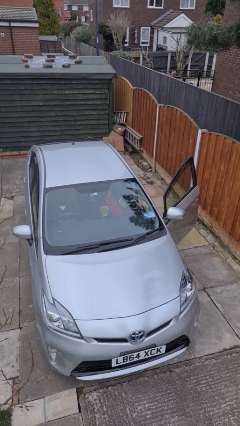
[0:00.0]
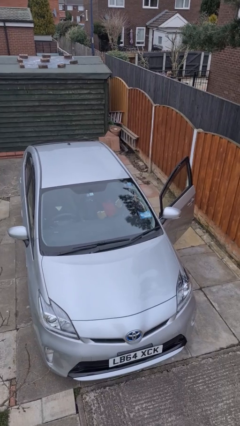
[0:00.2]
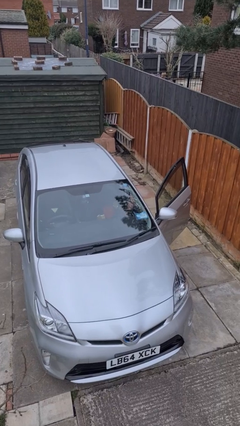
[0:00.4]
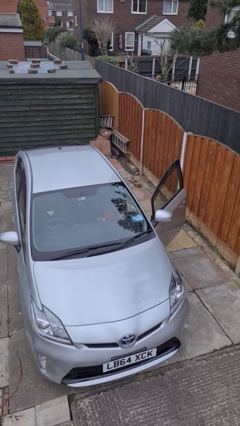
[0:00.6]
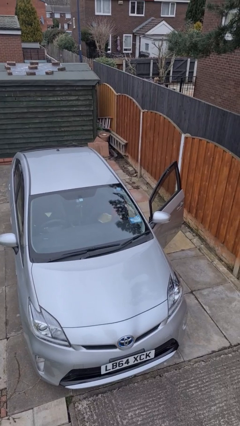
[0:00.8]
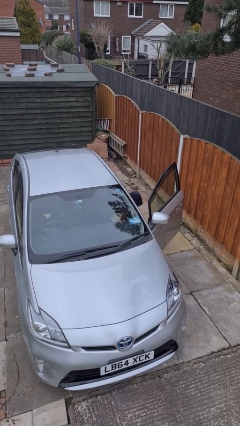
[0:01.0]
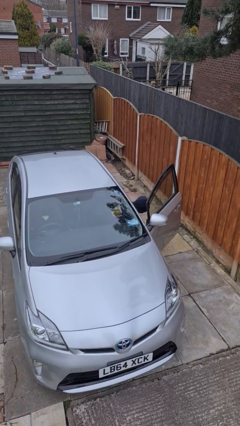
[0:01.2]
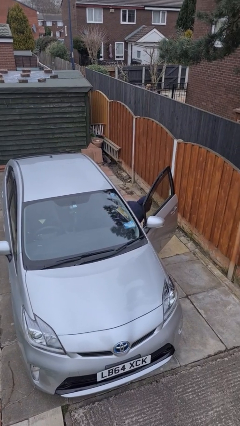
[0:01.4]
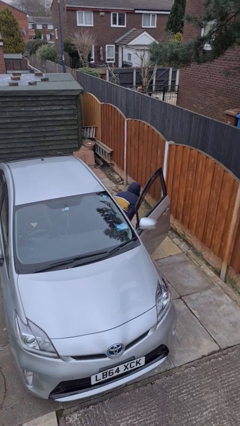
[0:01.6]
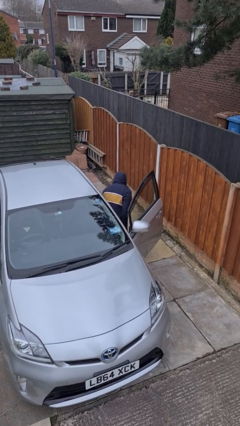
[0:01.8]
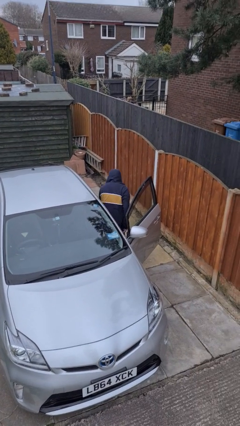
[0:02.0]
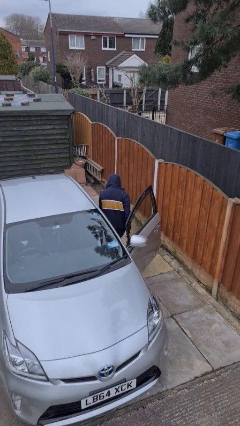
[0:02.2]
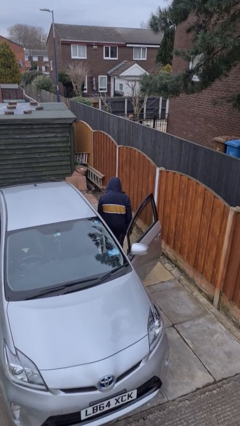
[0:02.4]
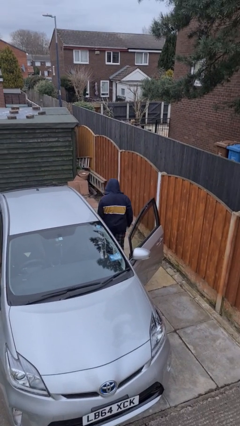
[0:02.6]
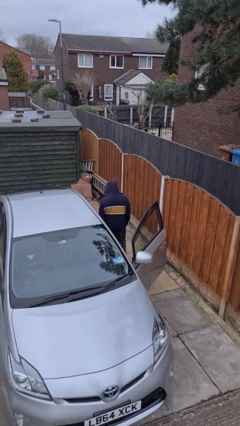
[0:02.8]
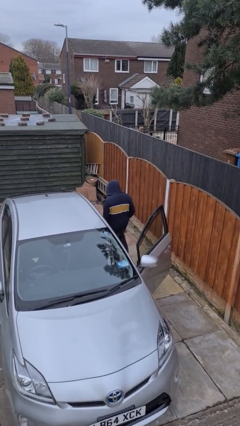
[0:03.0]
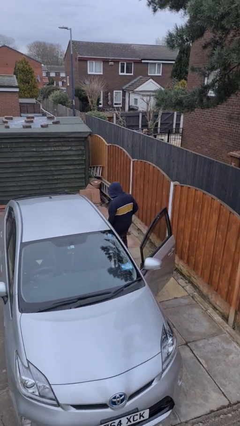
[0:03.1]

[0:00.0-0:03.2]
person exits car

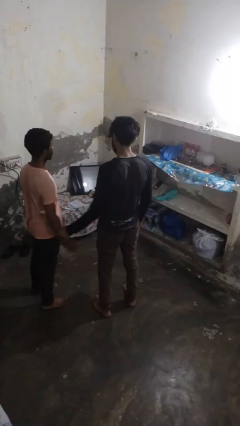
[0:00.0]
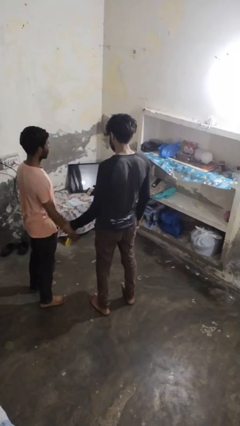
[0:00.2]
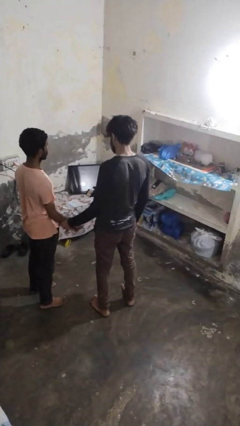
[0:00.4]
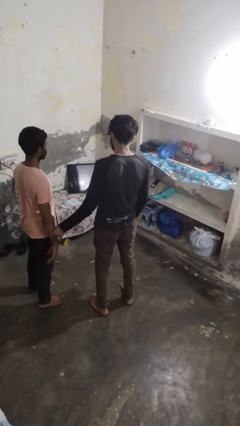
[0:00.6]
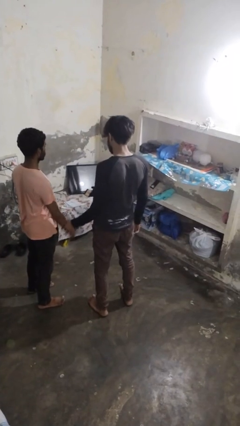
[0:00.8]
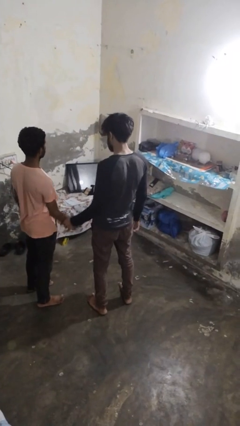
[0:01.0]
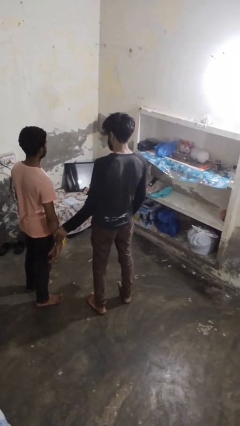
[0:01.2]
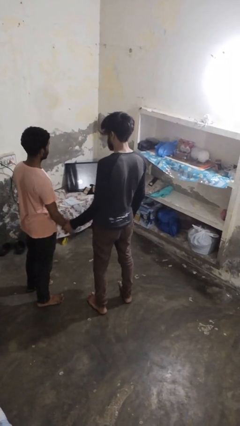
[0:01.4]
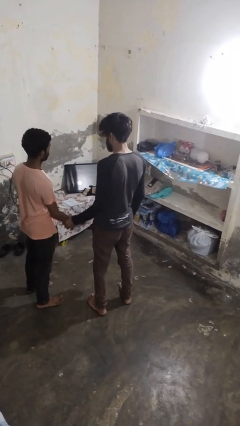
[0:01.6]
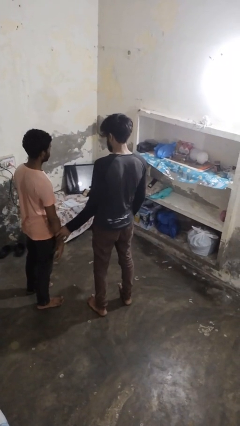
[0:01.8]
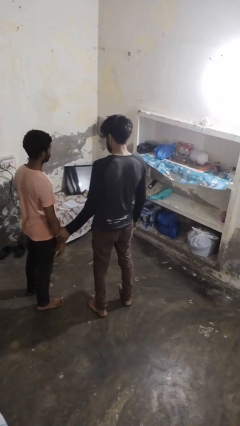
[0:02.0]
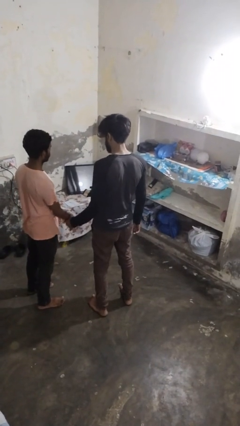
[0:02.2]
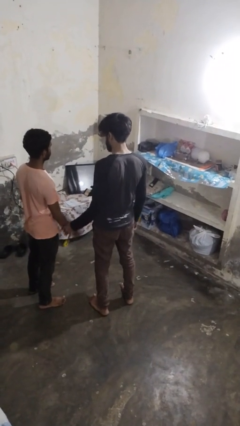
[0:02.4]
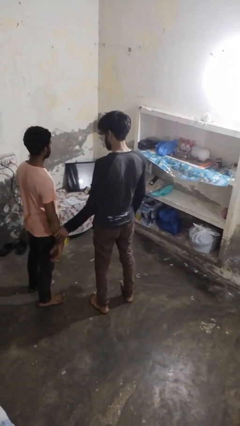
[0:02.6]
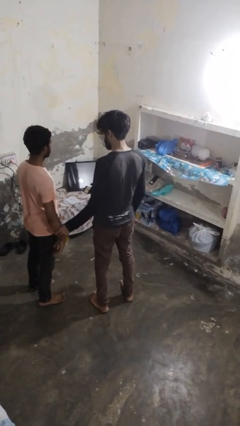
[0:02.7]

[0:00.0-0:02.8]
person grabs person by forearm

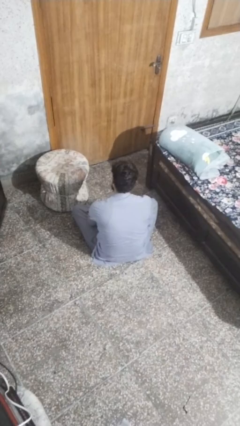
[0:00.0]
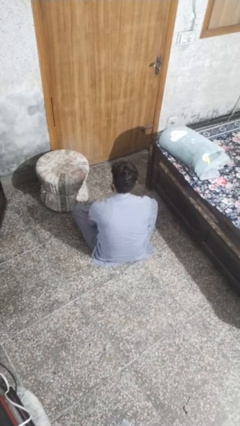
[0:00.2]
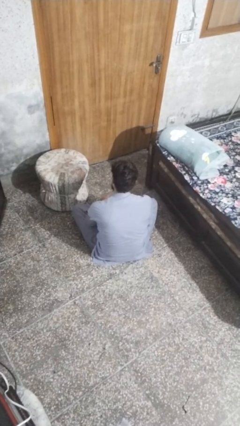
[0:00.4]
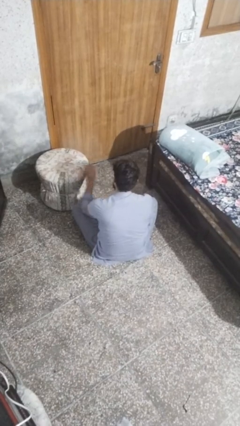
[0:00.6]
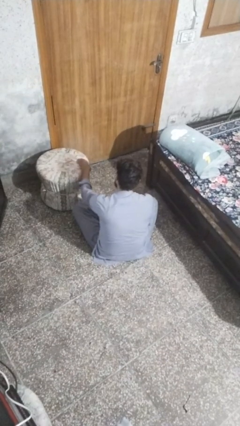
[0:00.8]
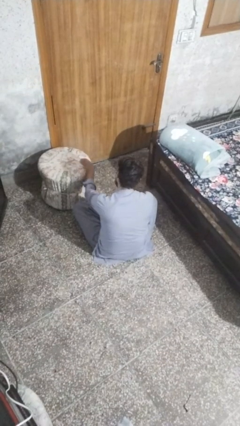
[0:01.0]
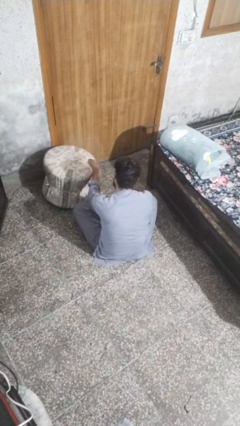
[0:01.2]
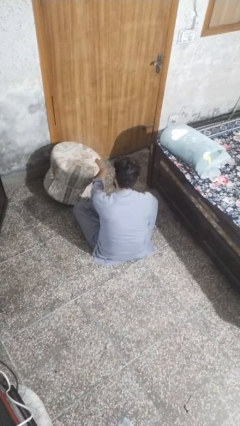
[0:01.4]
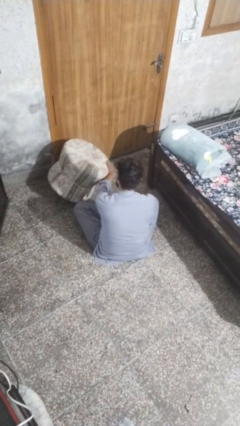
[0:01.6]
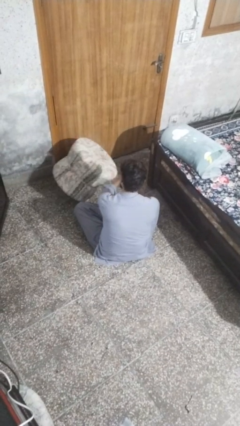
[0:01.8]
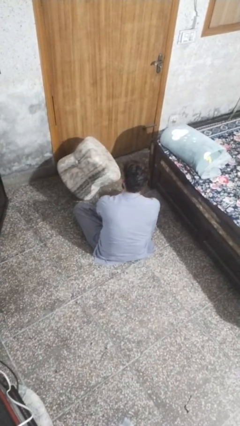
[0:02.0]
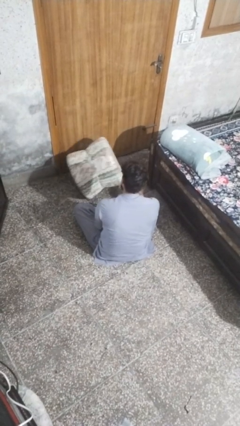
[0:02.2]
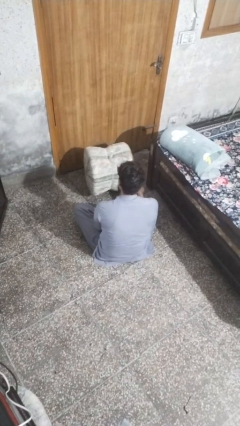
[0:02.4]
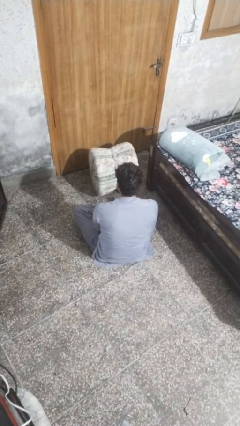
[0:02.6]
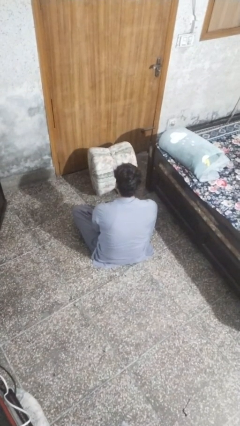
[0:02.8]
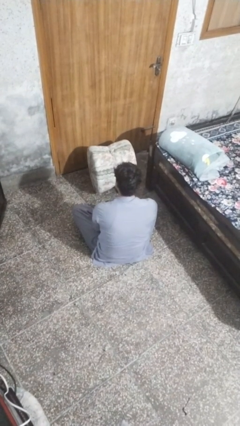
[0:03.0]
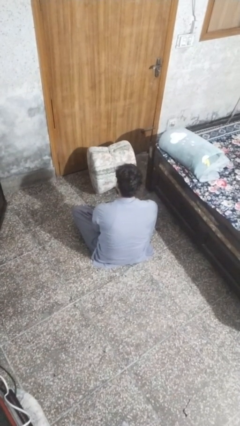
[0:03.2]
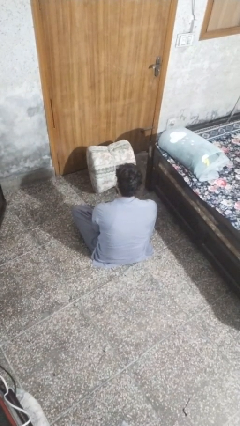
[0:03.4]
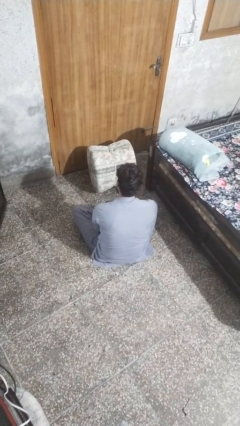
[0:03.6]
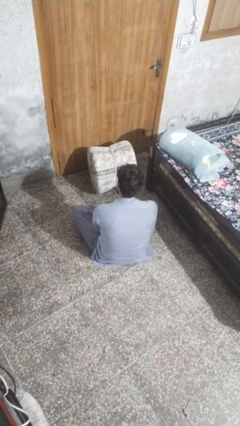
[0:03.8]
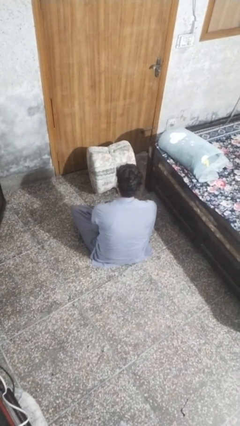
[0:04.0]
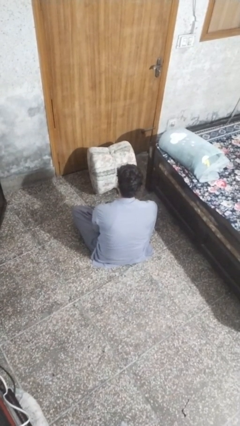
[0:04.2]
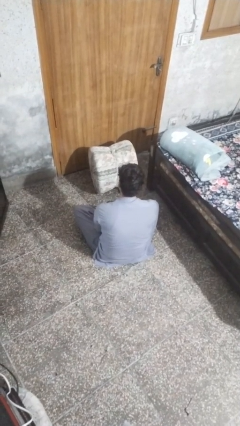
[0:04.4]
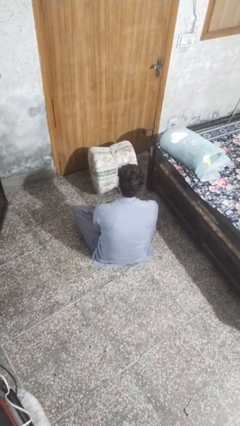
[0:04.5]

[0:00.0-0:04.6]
person knocks over furniture

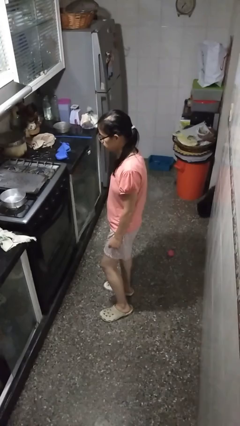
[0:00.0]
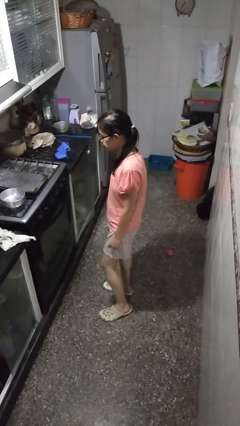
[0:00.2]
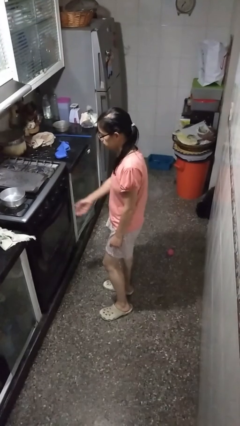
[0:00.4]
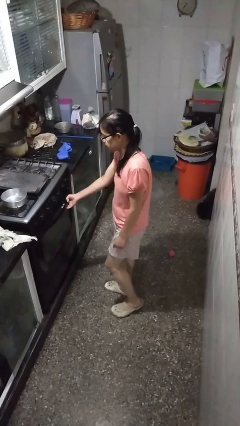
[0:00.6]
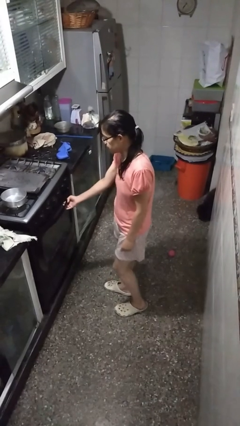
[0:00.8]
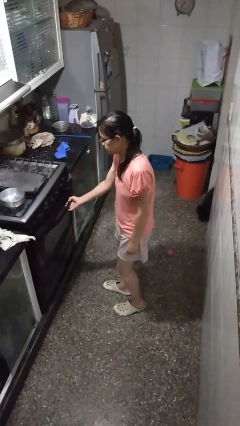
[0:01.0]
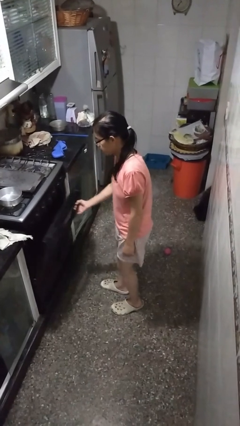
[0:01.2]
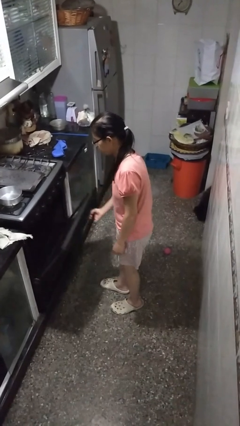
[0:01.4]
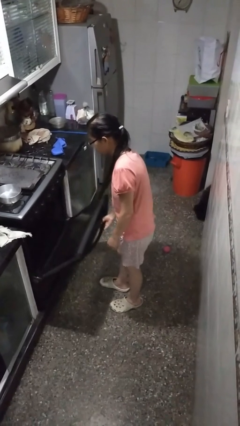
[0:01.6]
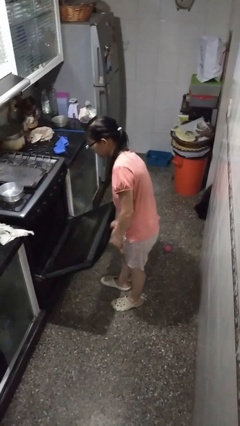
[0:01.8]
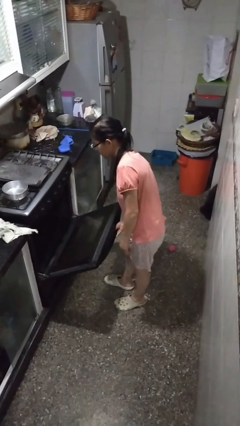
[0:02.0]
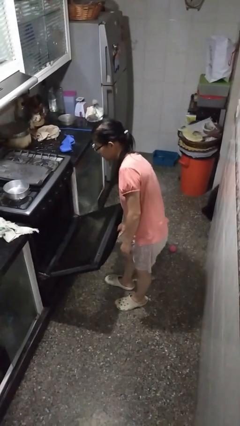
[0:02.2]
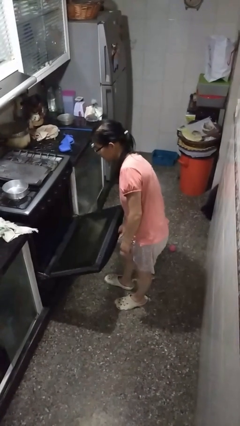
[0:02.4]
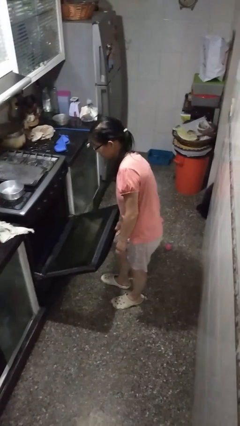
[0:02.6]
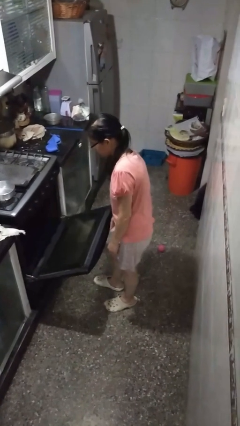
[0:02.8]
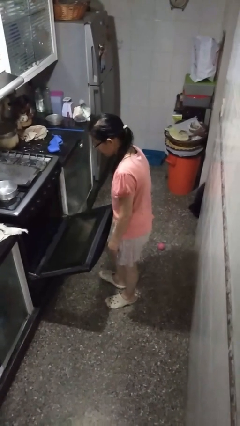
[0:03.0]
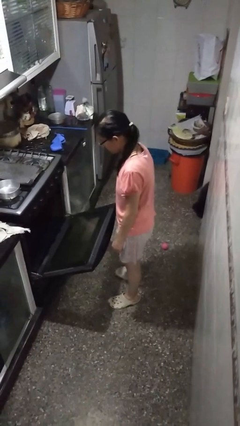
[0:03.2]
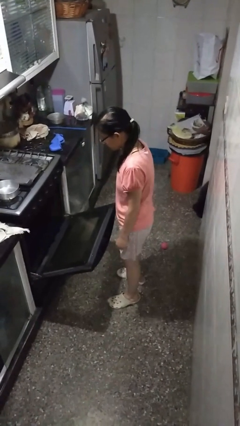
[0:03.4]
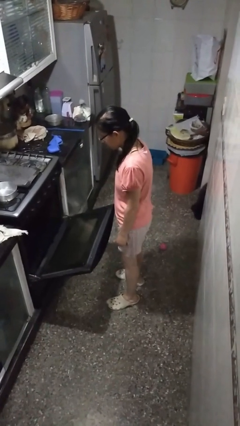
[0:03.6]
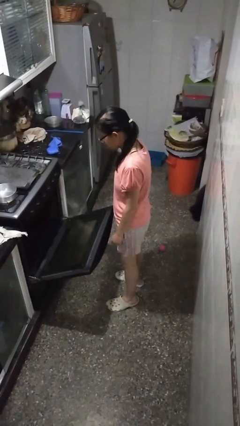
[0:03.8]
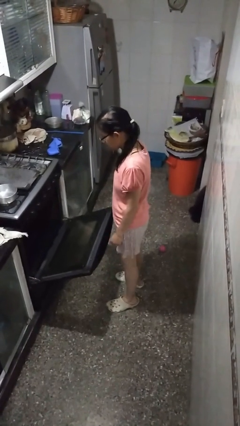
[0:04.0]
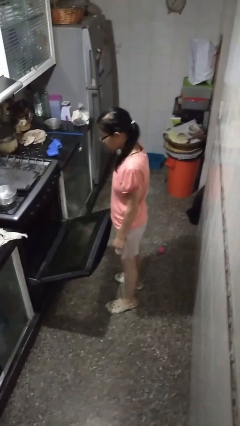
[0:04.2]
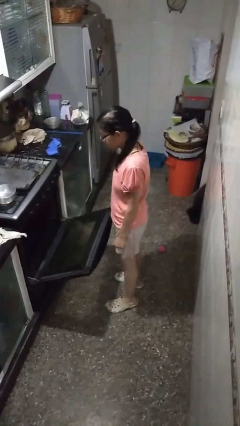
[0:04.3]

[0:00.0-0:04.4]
person opens oven door

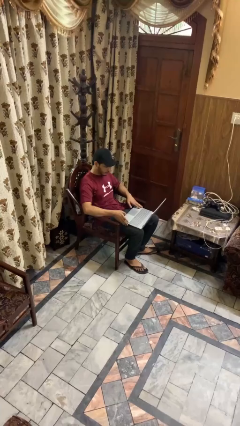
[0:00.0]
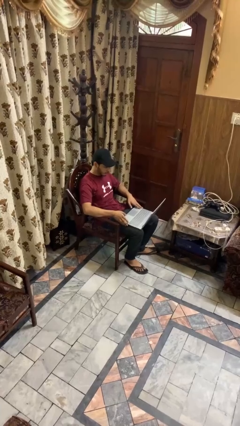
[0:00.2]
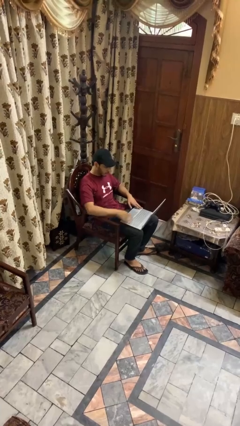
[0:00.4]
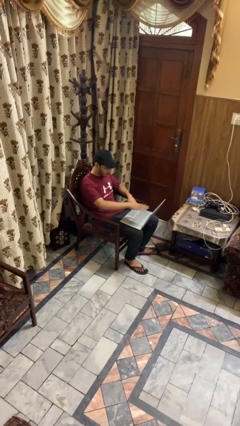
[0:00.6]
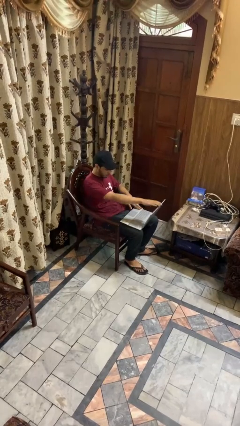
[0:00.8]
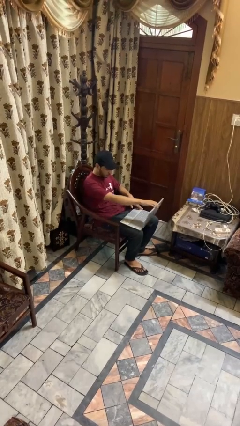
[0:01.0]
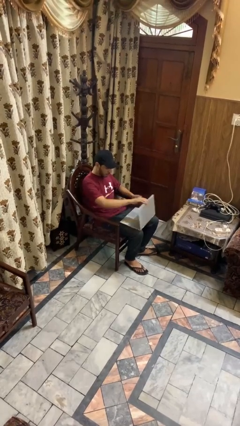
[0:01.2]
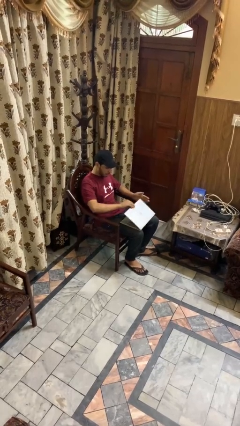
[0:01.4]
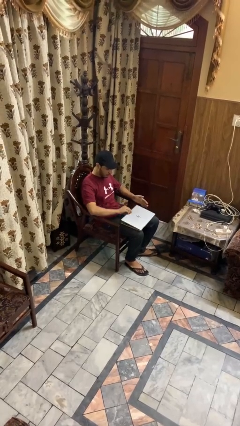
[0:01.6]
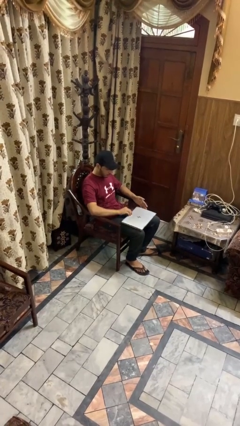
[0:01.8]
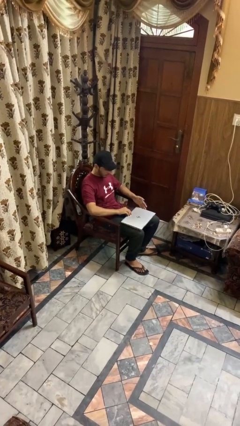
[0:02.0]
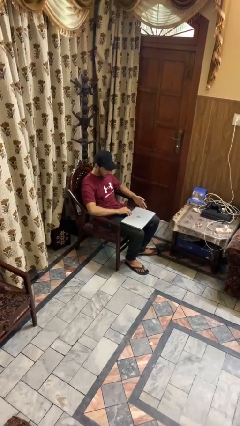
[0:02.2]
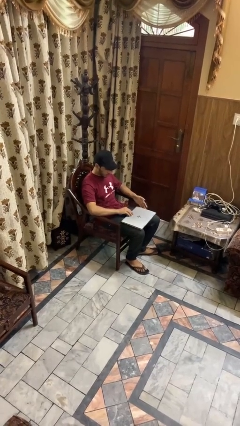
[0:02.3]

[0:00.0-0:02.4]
person closes laptop

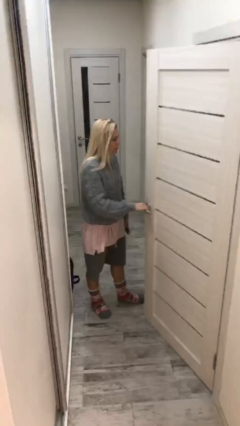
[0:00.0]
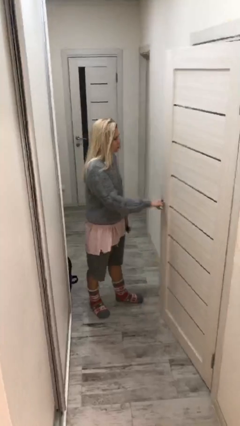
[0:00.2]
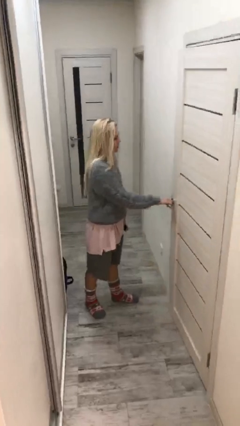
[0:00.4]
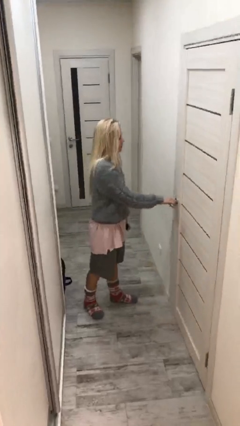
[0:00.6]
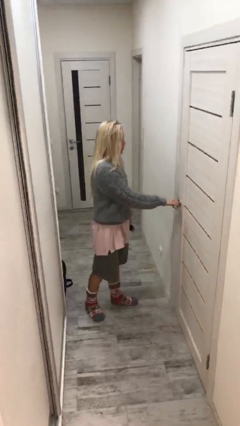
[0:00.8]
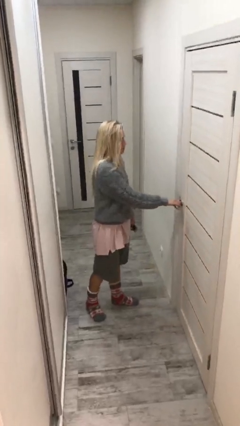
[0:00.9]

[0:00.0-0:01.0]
person closes facility door
